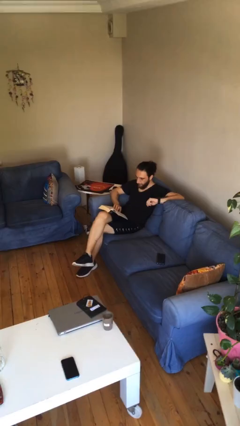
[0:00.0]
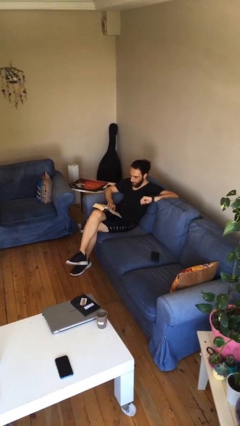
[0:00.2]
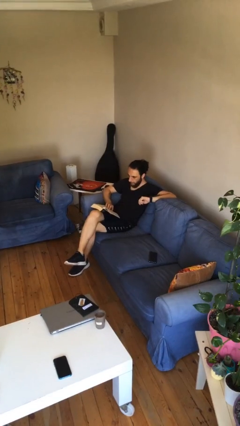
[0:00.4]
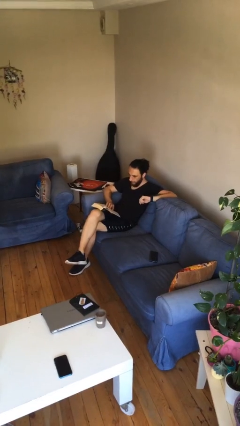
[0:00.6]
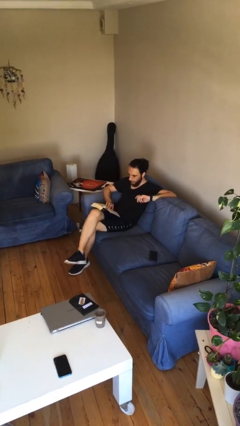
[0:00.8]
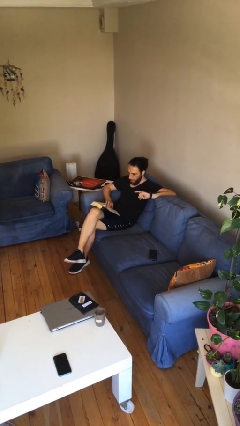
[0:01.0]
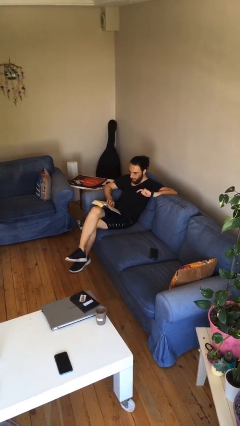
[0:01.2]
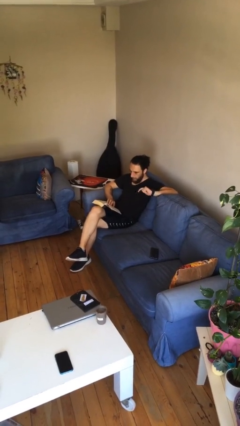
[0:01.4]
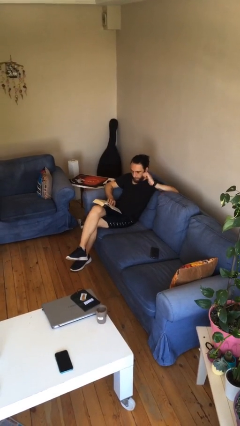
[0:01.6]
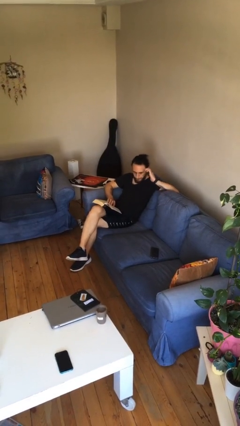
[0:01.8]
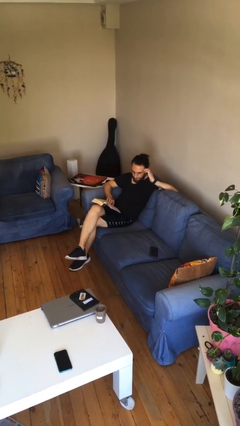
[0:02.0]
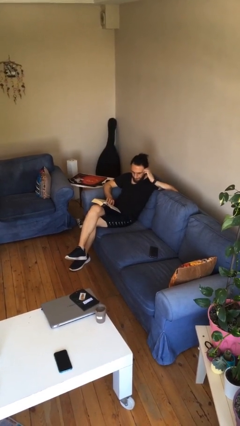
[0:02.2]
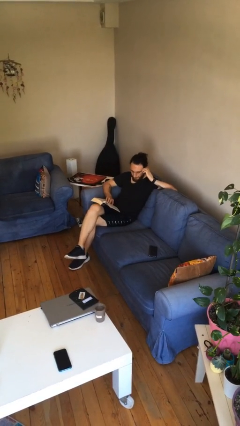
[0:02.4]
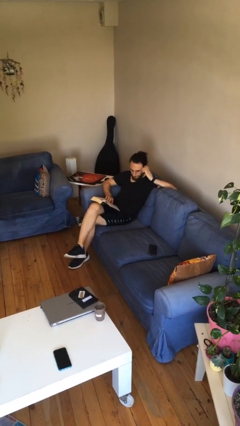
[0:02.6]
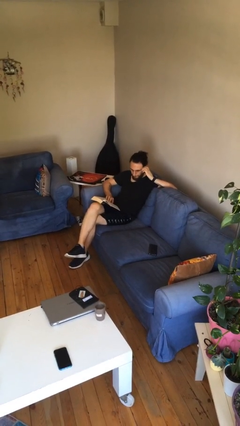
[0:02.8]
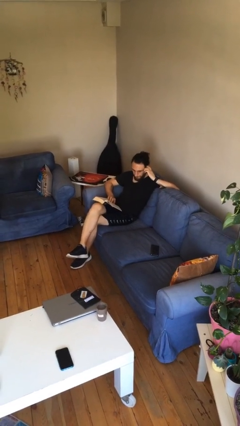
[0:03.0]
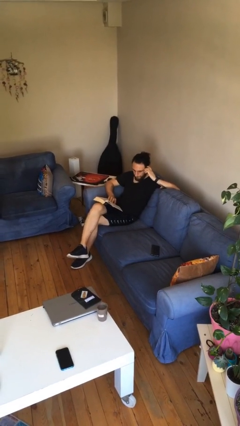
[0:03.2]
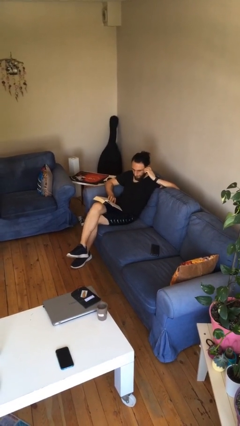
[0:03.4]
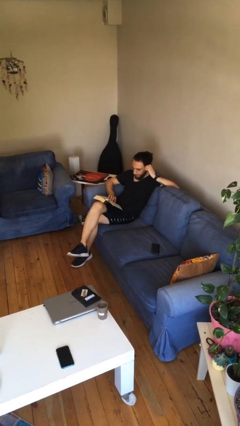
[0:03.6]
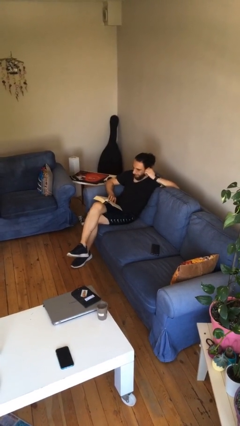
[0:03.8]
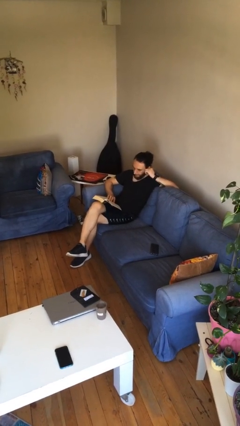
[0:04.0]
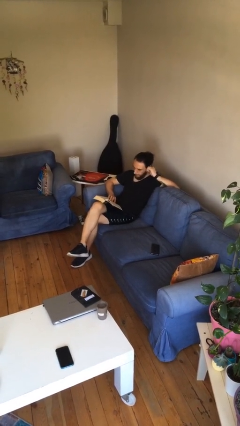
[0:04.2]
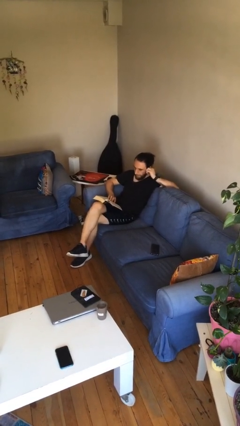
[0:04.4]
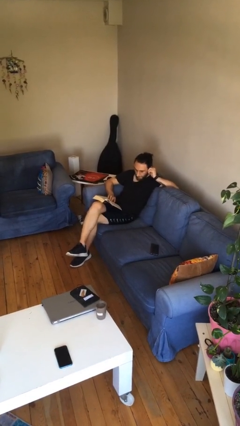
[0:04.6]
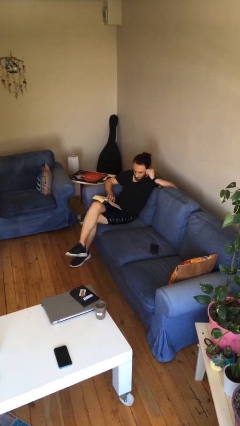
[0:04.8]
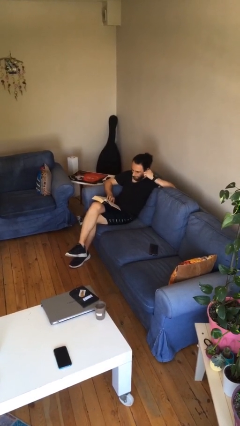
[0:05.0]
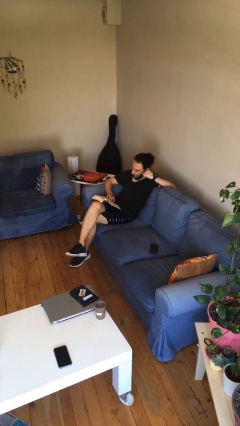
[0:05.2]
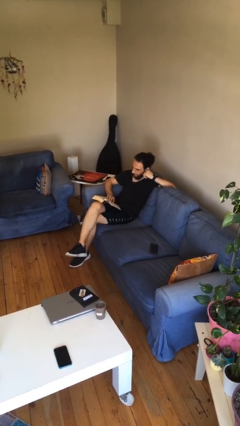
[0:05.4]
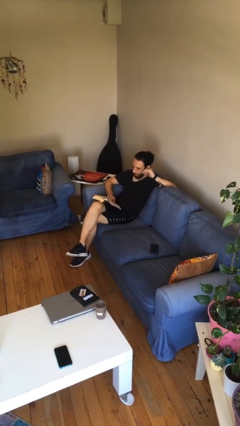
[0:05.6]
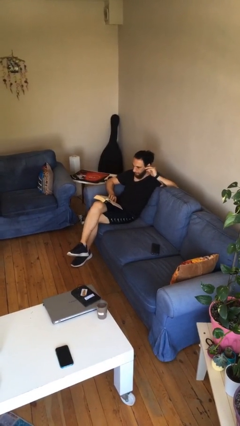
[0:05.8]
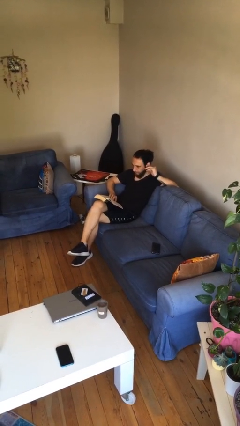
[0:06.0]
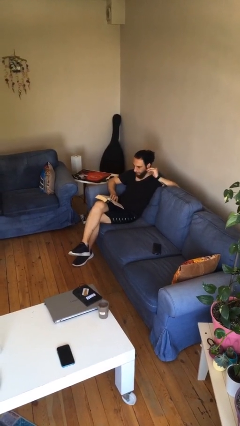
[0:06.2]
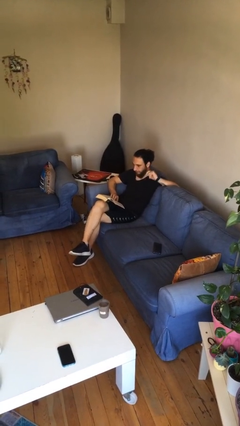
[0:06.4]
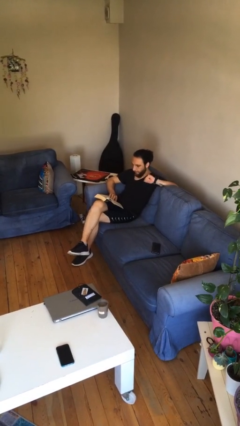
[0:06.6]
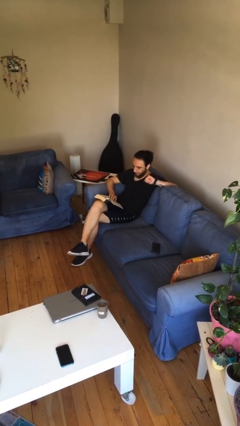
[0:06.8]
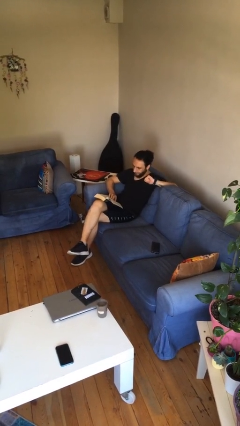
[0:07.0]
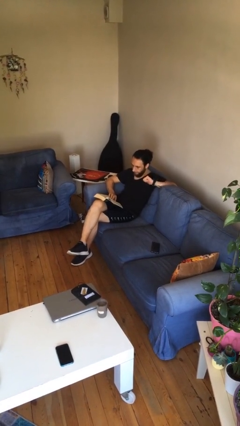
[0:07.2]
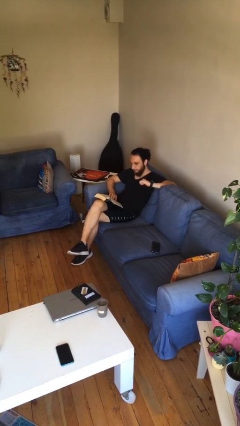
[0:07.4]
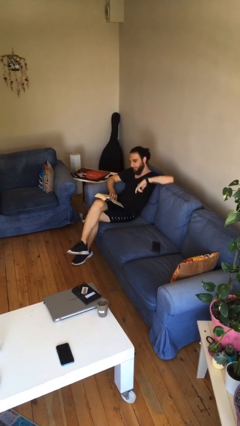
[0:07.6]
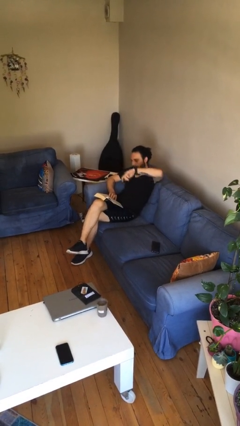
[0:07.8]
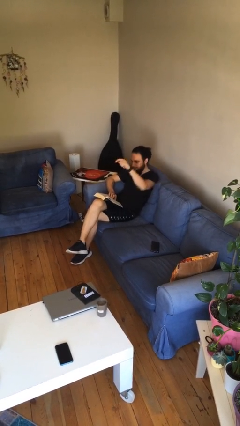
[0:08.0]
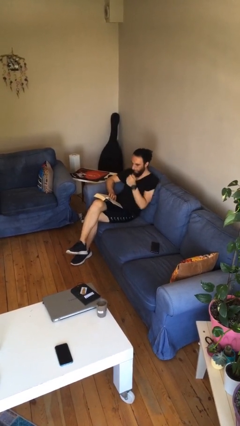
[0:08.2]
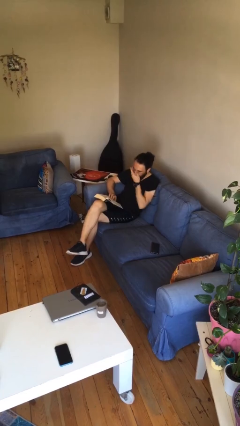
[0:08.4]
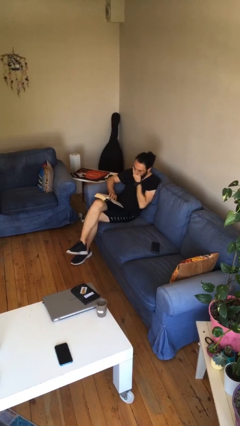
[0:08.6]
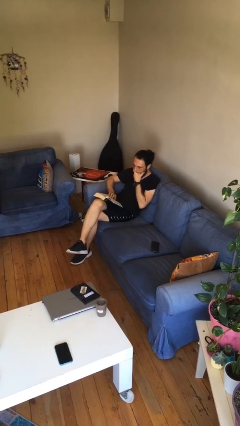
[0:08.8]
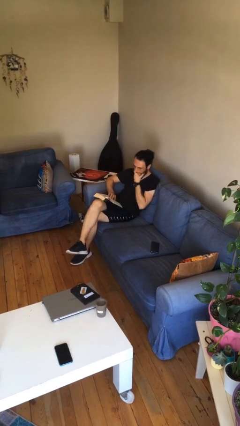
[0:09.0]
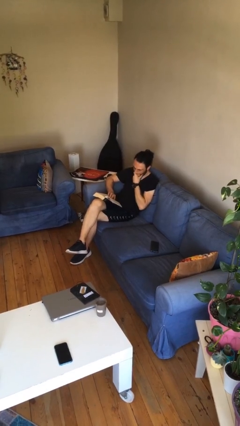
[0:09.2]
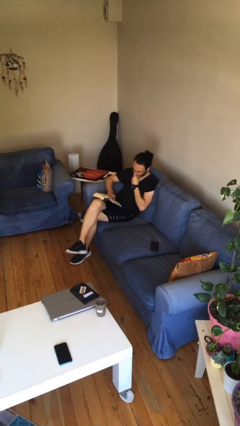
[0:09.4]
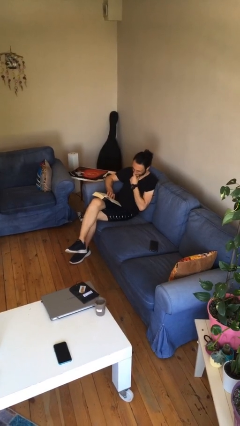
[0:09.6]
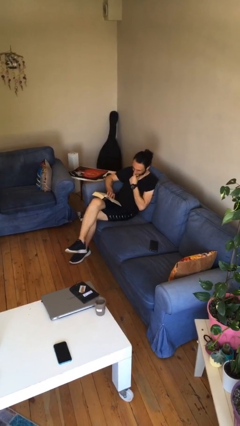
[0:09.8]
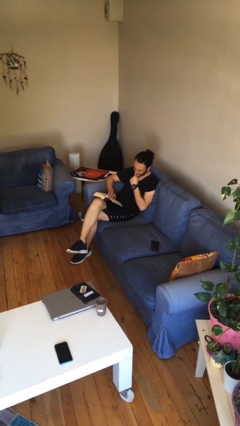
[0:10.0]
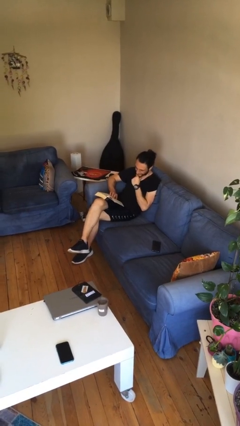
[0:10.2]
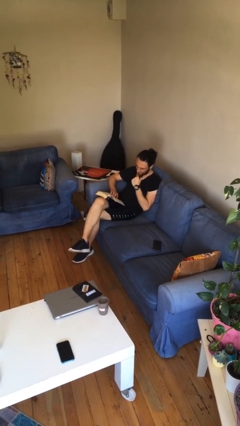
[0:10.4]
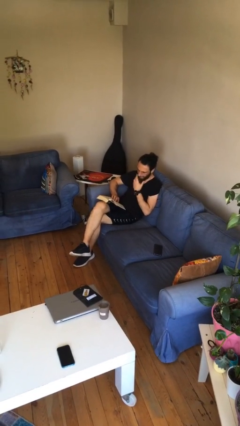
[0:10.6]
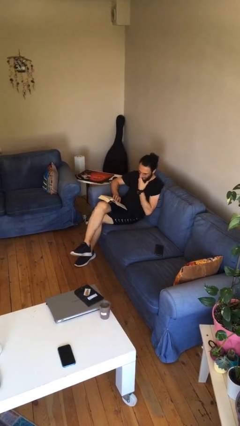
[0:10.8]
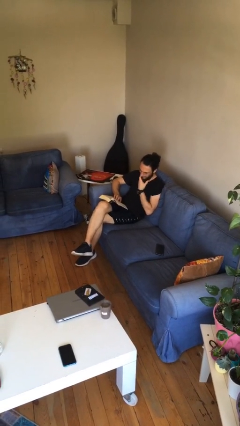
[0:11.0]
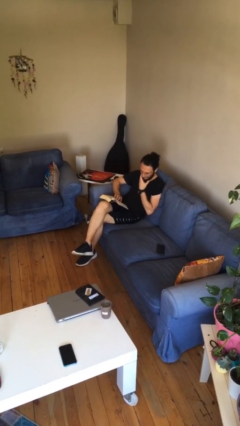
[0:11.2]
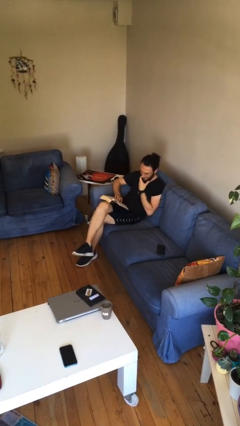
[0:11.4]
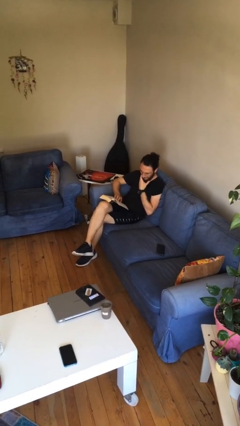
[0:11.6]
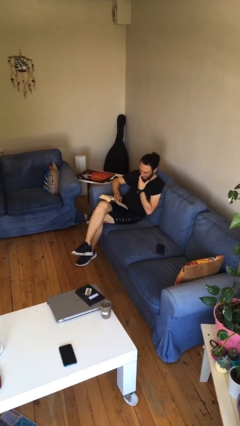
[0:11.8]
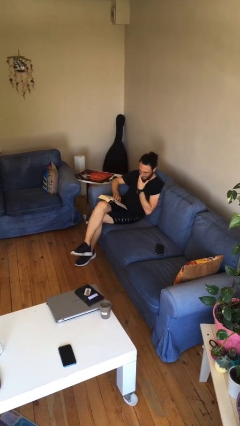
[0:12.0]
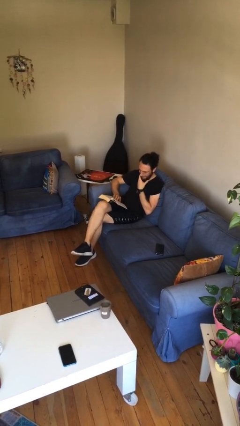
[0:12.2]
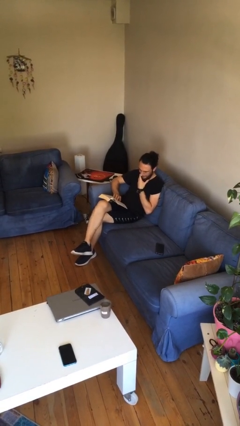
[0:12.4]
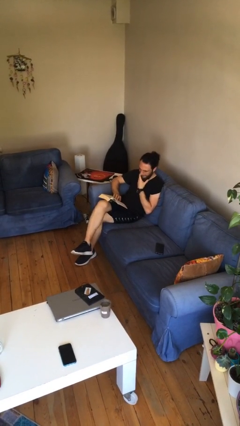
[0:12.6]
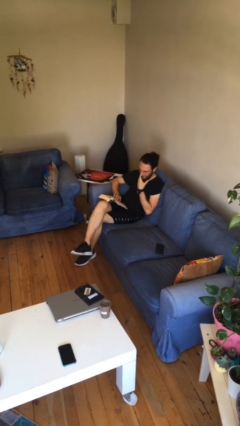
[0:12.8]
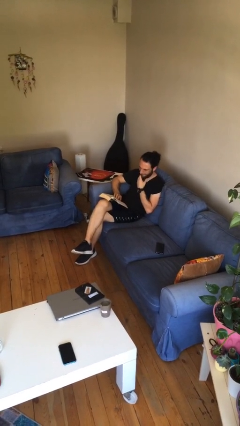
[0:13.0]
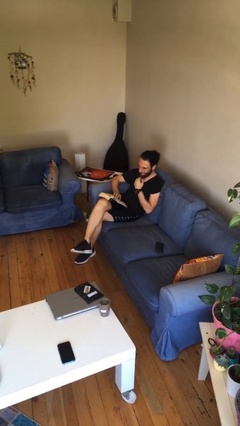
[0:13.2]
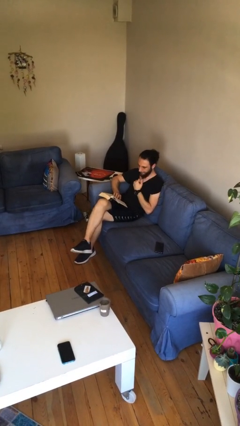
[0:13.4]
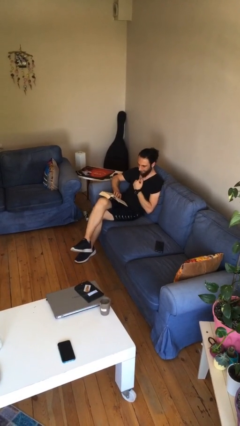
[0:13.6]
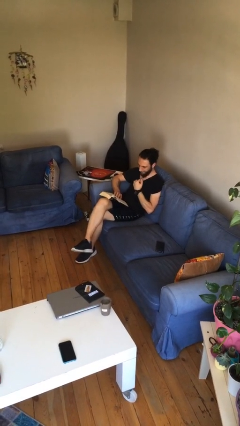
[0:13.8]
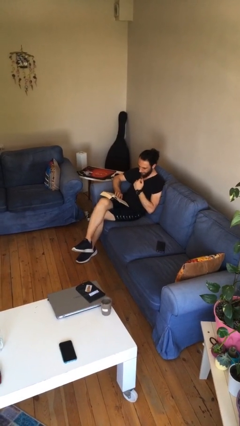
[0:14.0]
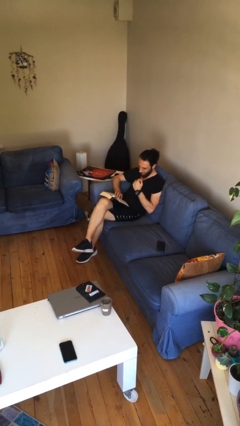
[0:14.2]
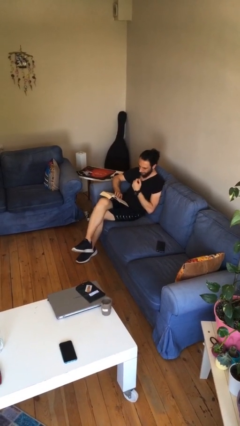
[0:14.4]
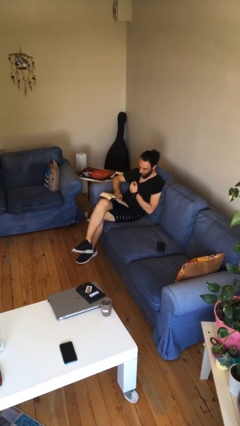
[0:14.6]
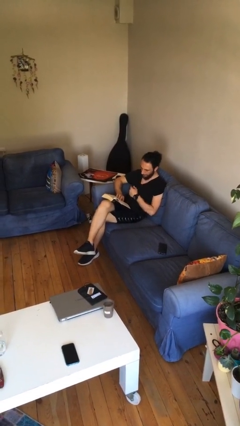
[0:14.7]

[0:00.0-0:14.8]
person reads document

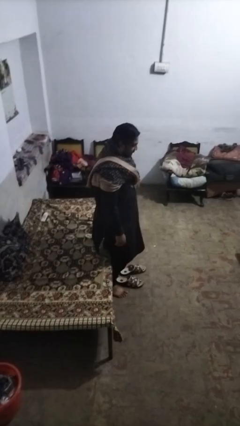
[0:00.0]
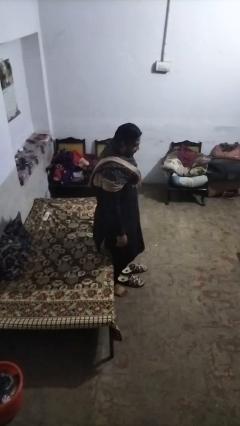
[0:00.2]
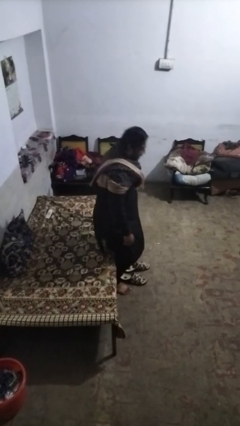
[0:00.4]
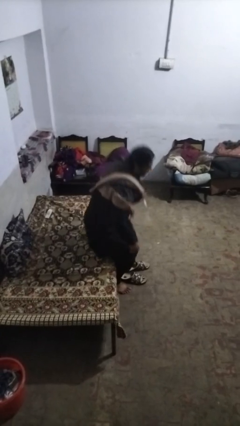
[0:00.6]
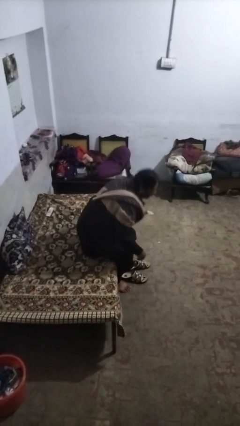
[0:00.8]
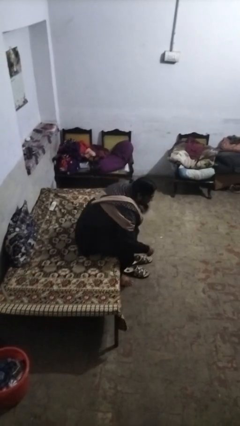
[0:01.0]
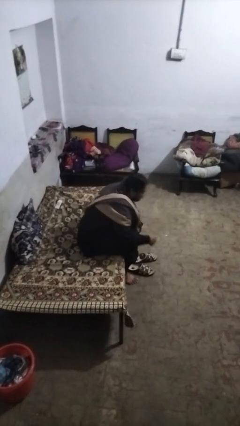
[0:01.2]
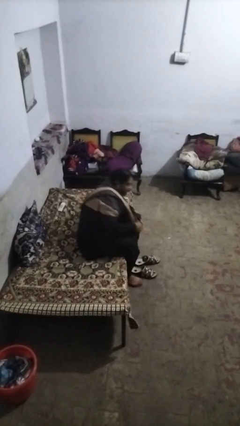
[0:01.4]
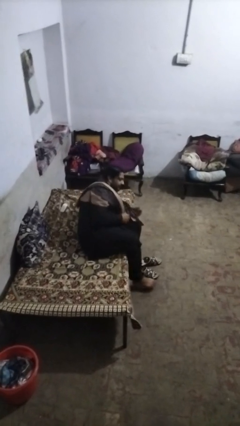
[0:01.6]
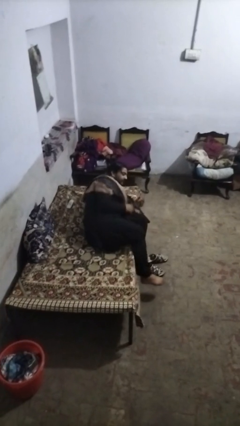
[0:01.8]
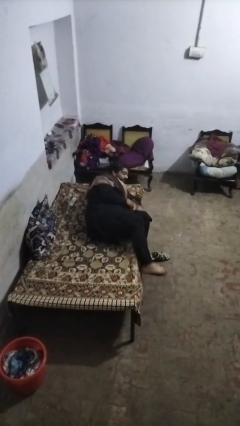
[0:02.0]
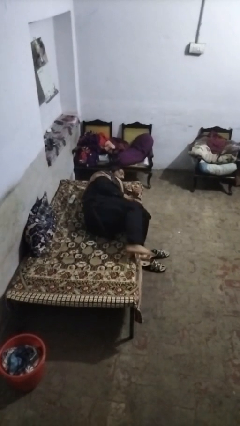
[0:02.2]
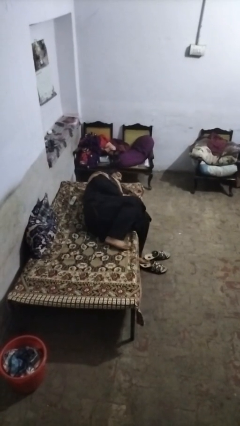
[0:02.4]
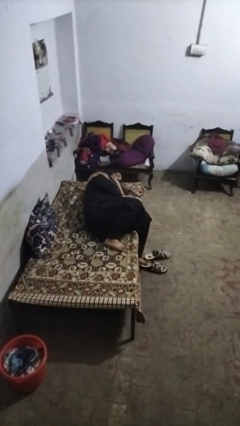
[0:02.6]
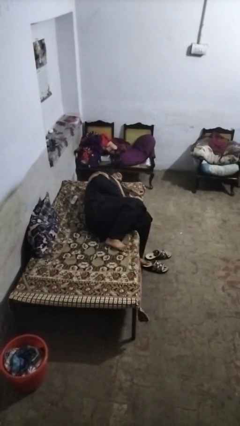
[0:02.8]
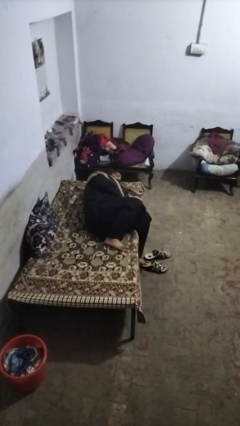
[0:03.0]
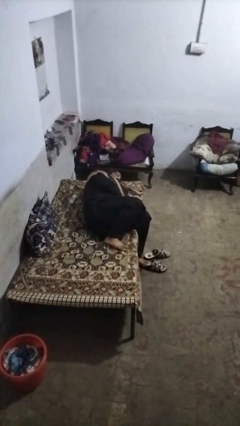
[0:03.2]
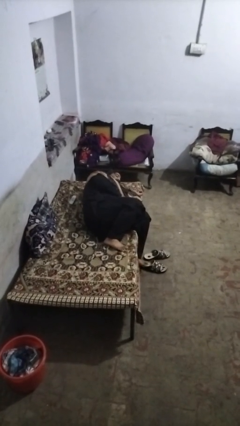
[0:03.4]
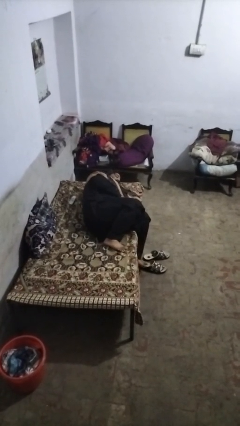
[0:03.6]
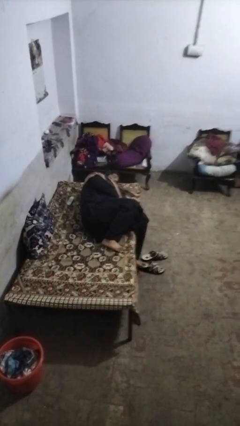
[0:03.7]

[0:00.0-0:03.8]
person lies down on bed
